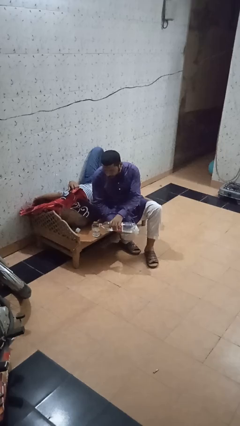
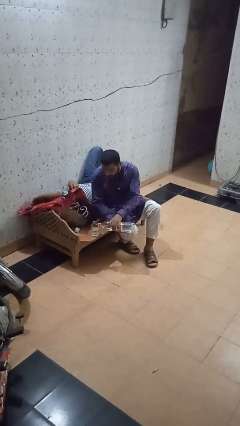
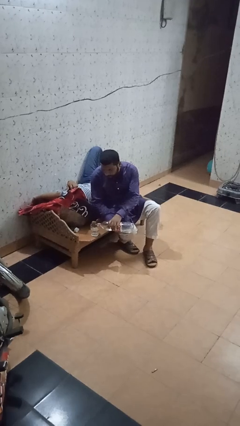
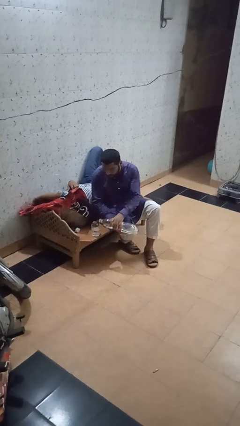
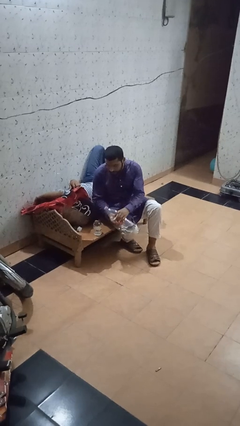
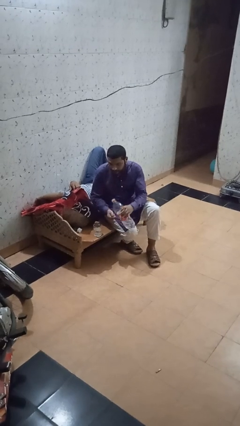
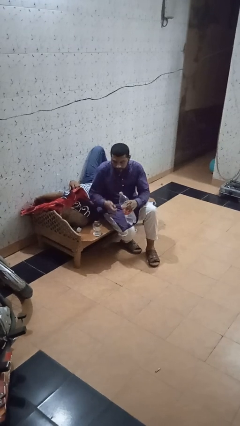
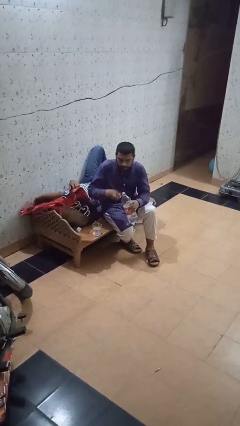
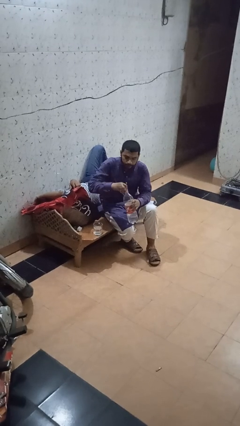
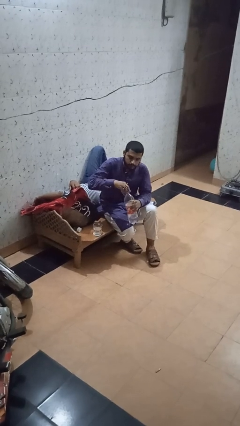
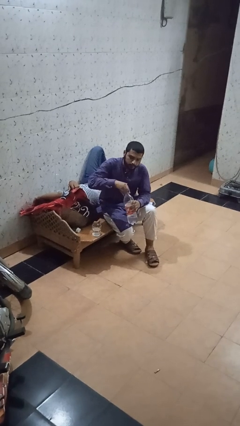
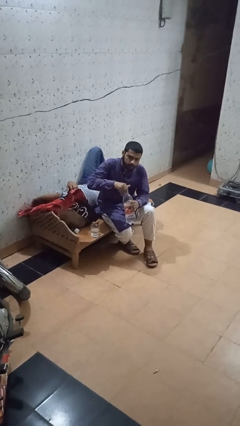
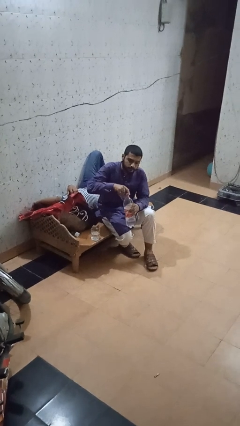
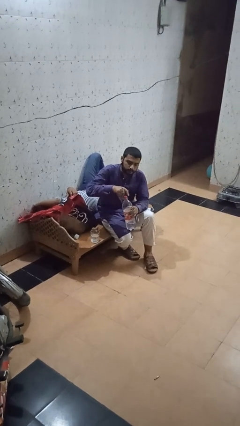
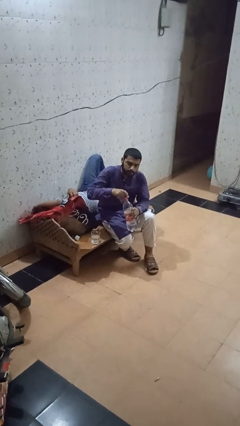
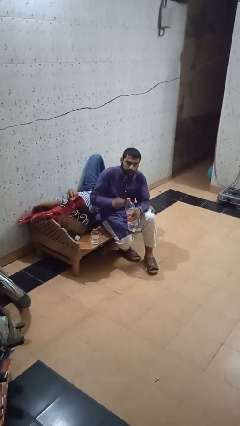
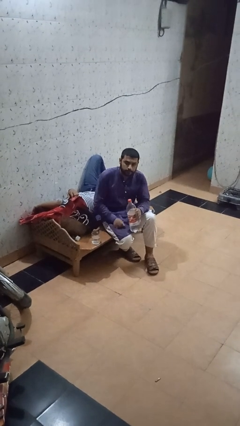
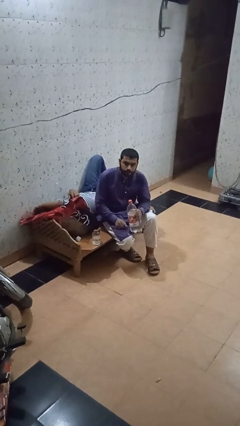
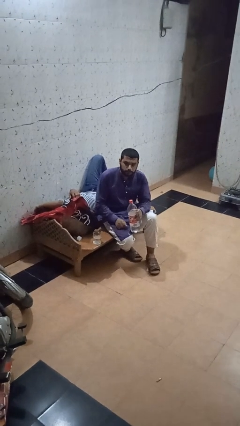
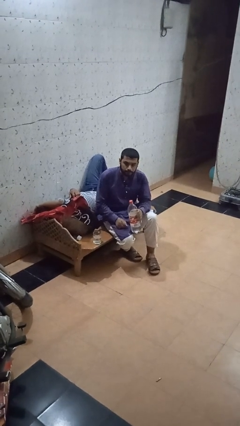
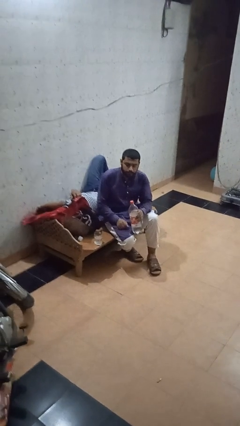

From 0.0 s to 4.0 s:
person screws lid to bottle

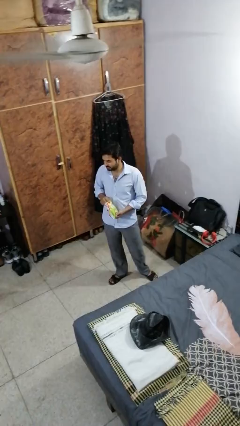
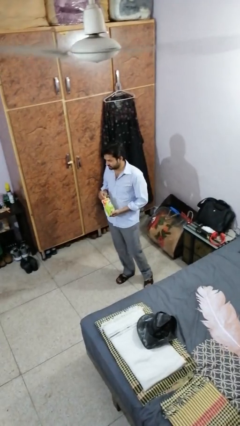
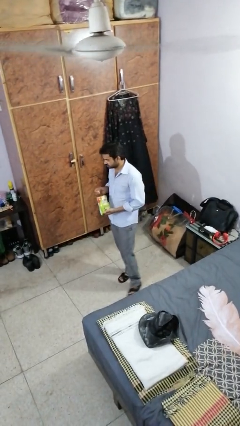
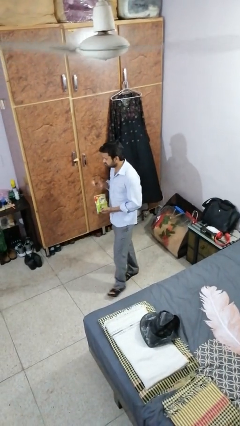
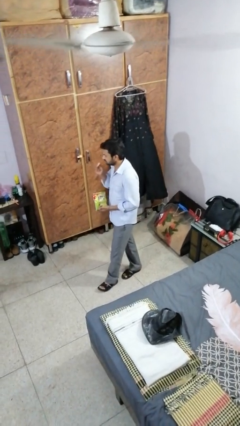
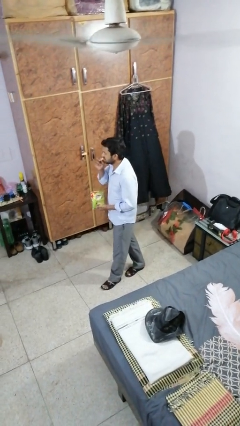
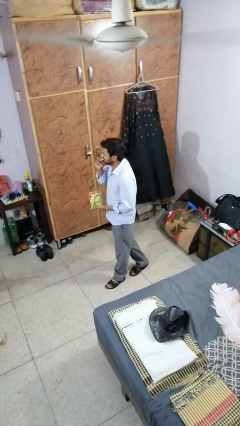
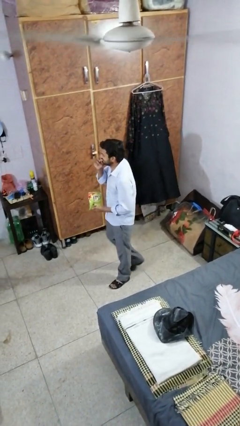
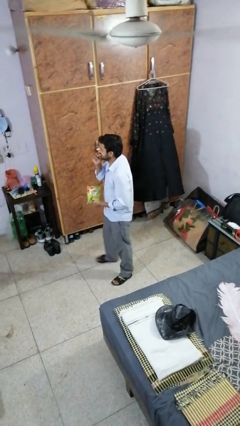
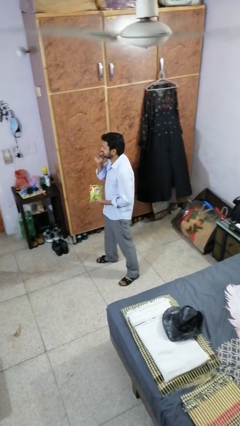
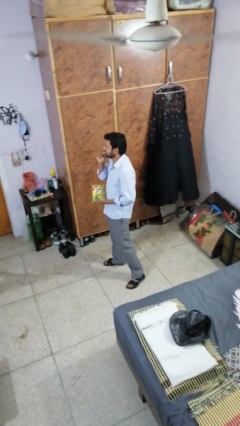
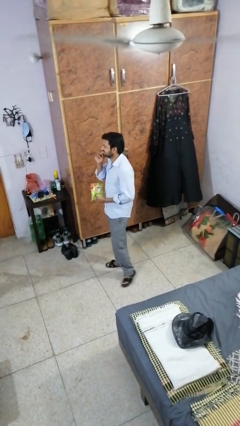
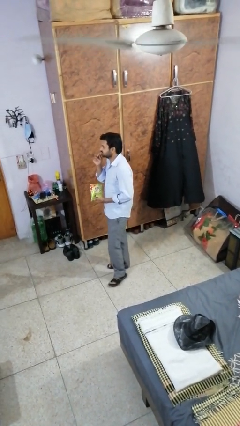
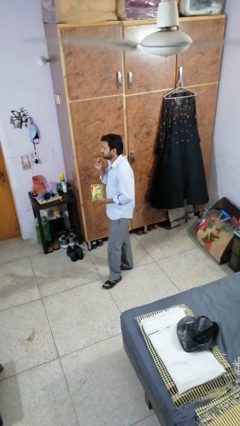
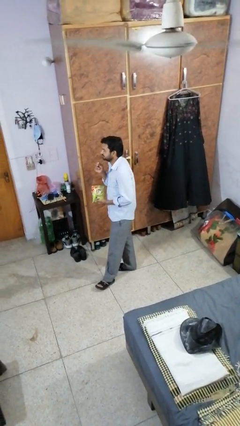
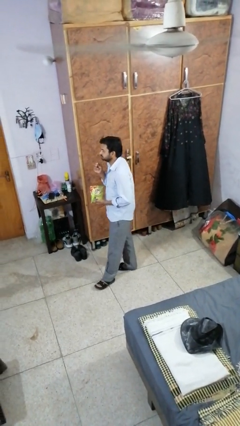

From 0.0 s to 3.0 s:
person eats snack from bag

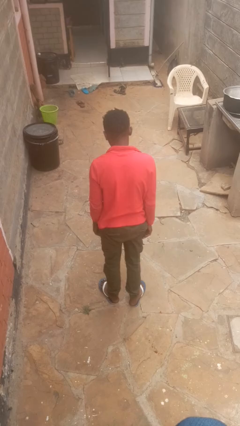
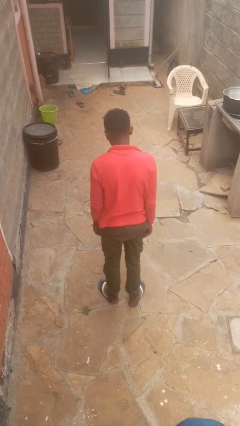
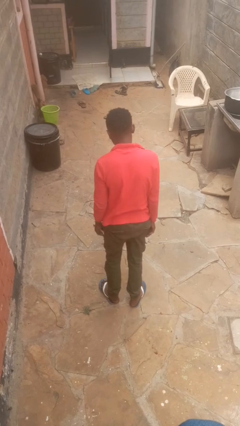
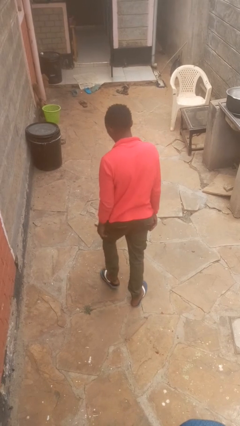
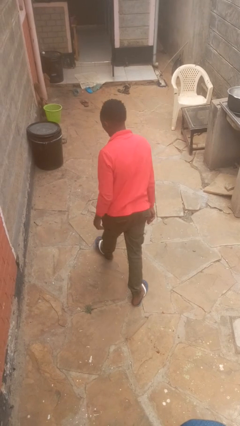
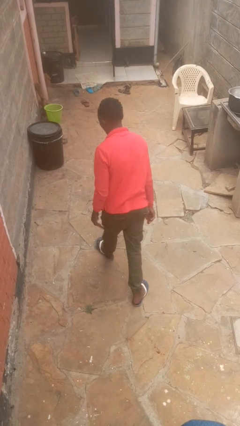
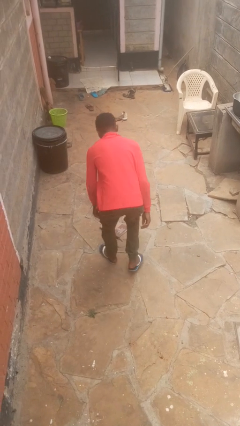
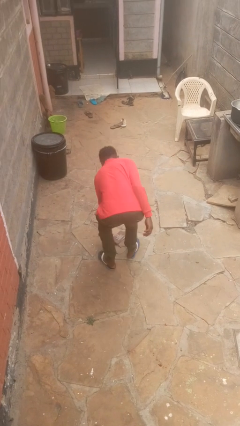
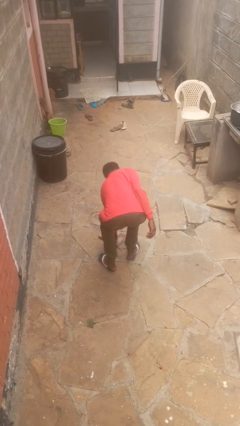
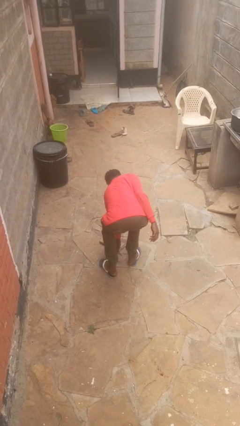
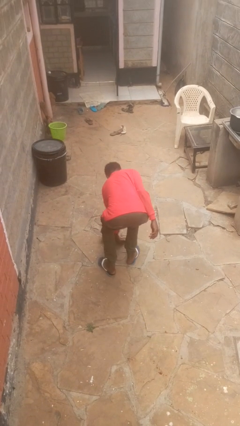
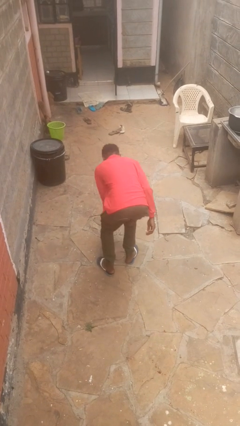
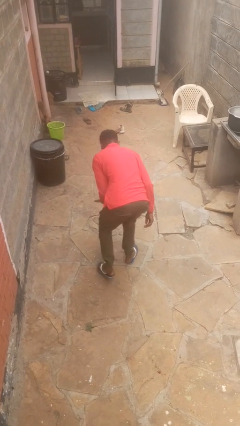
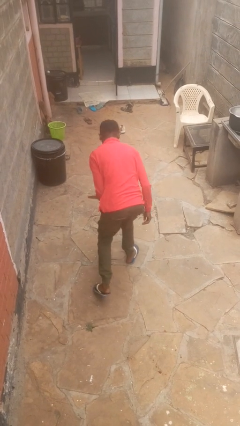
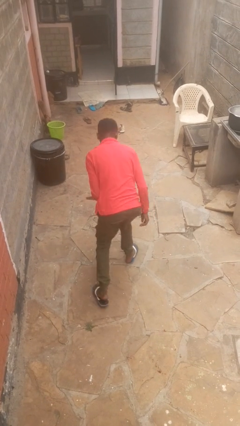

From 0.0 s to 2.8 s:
person picks up object from floor

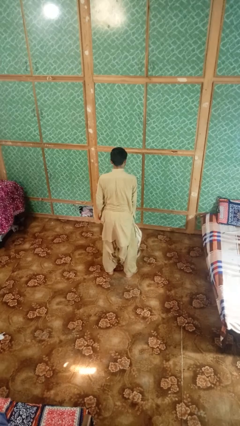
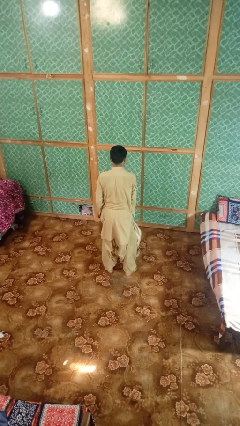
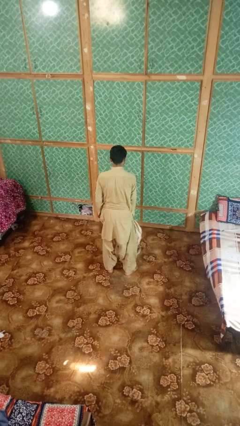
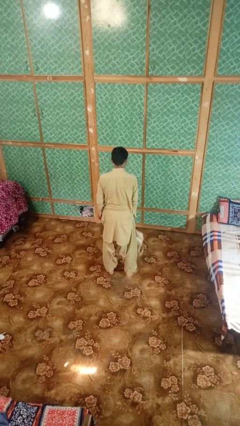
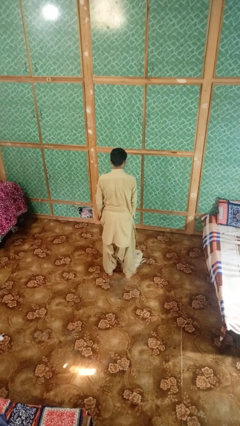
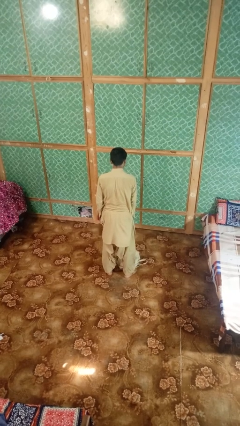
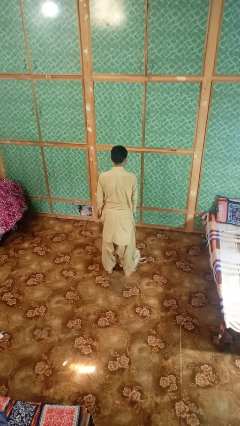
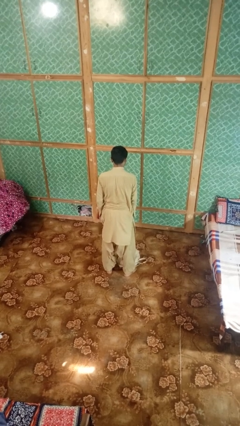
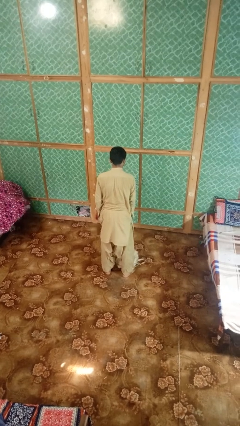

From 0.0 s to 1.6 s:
person throws object to ground

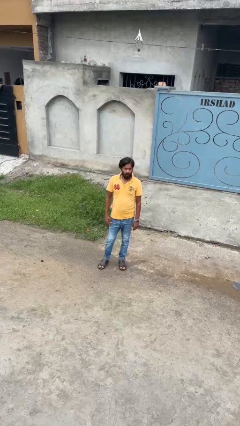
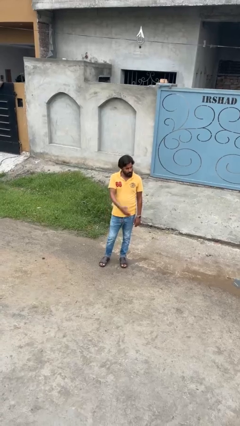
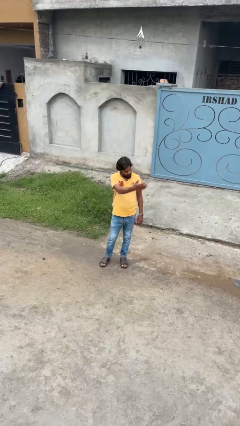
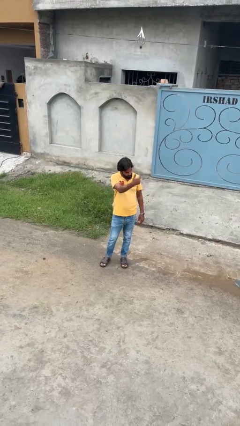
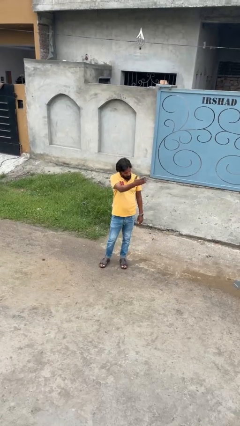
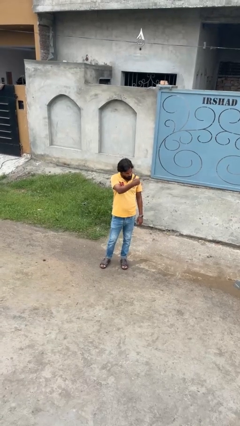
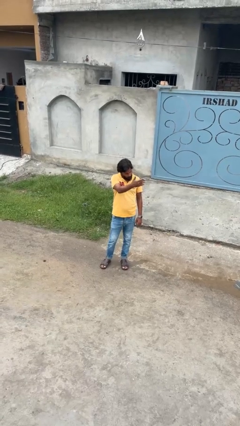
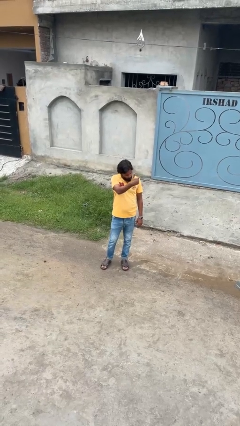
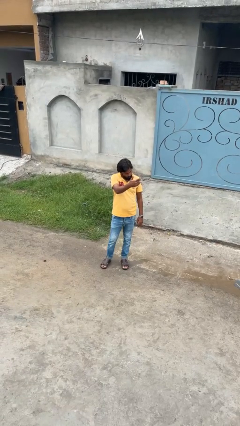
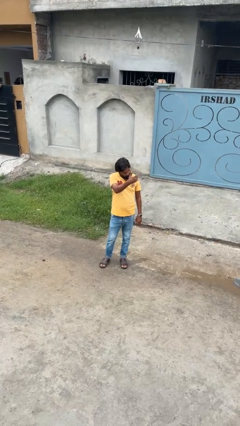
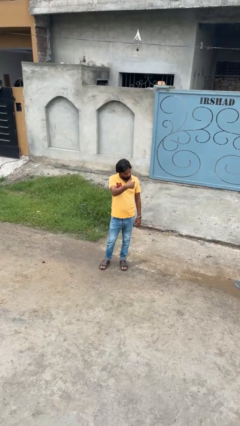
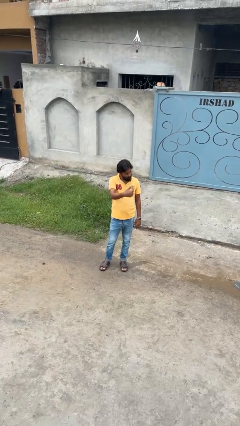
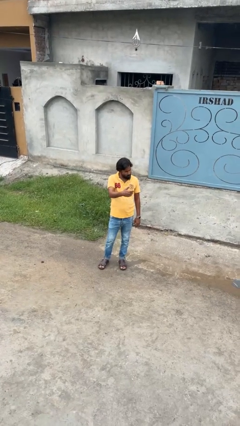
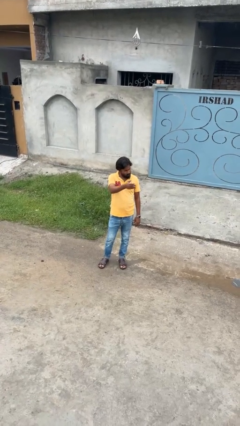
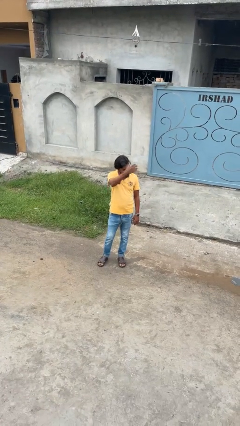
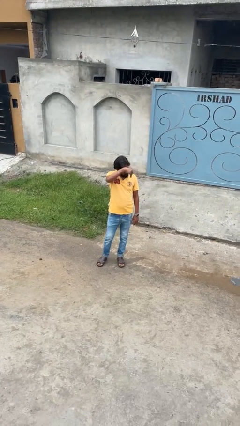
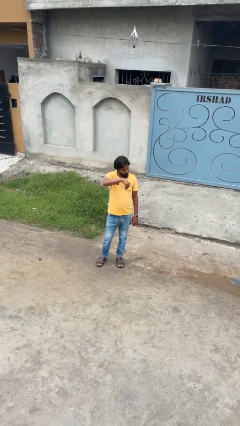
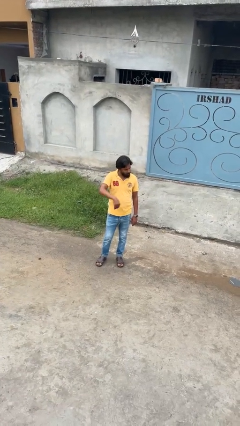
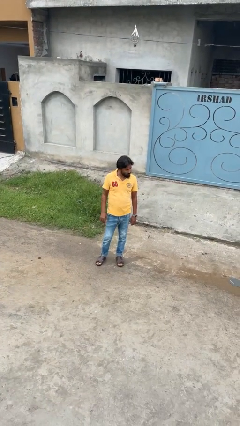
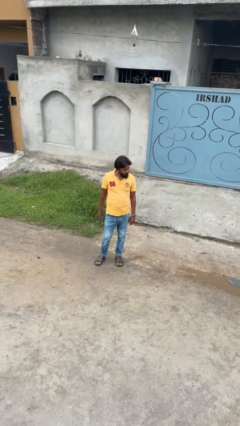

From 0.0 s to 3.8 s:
person gestures come here

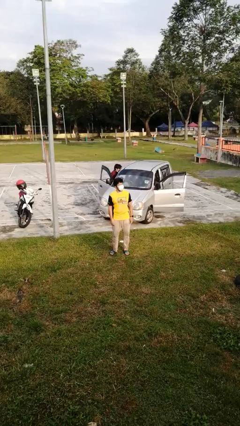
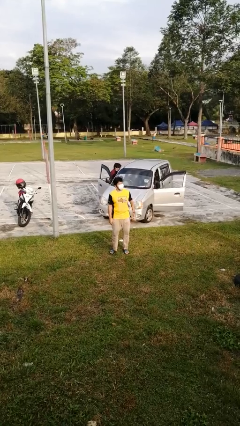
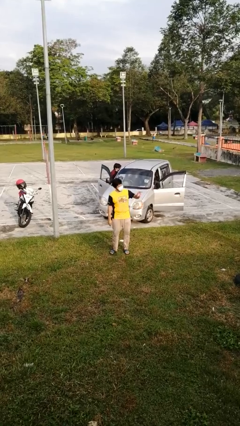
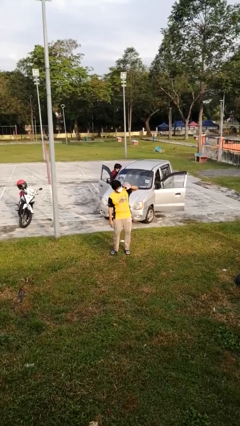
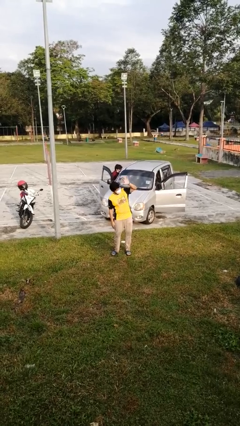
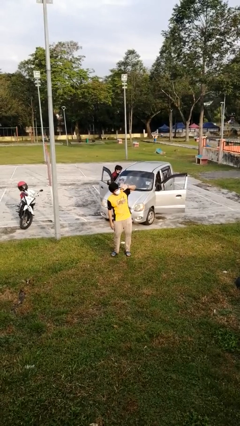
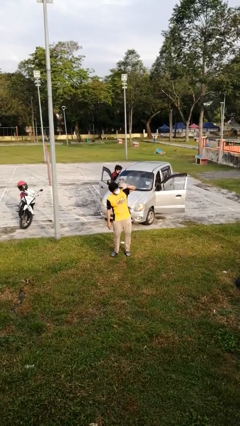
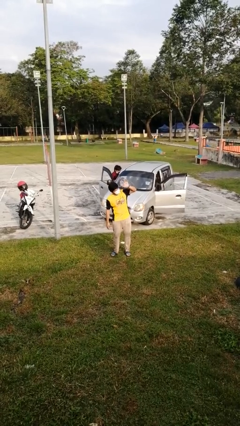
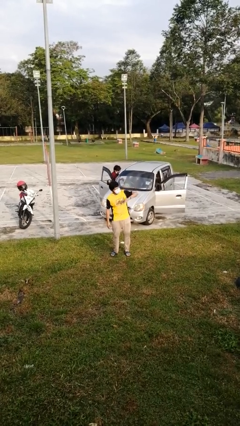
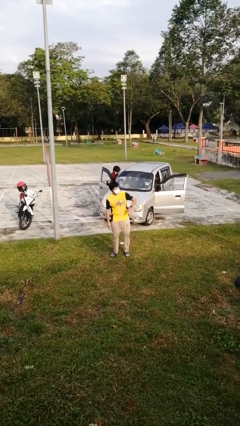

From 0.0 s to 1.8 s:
person waves at person

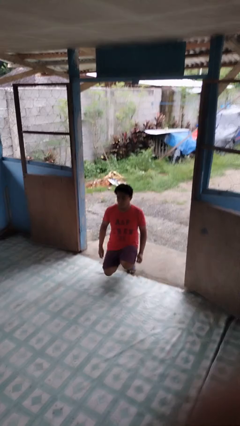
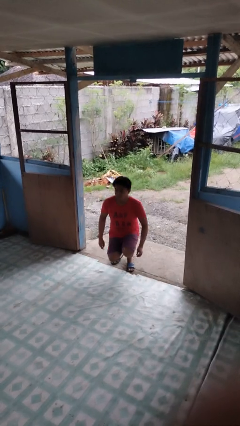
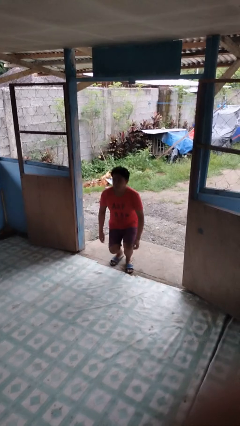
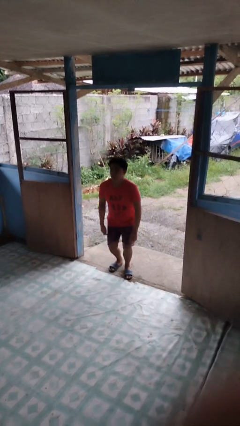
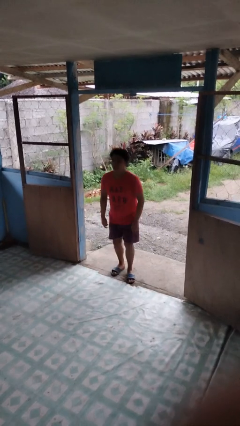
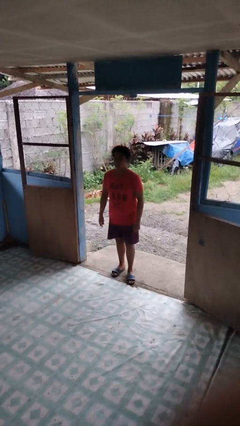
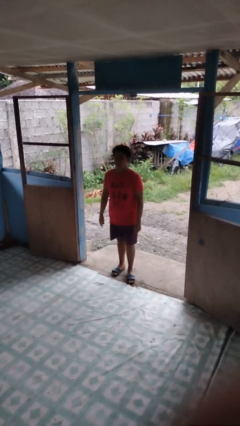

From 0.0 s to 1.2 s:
person stands up from floor
